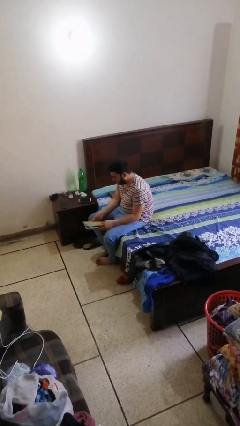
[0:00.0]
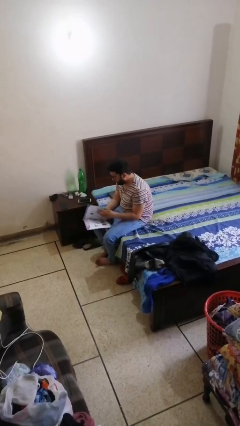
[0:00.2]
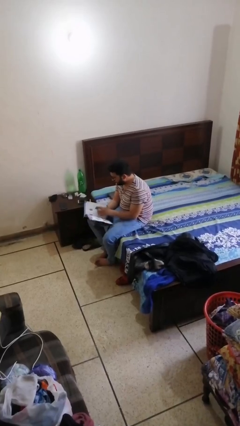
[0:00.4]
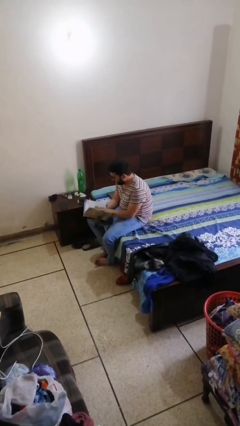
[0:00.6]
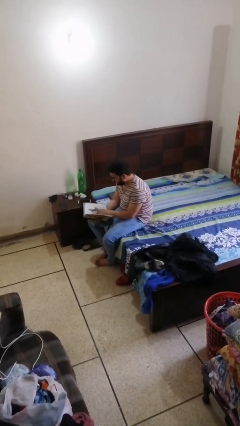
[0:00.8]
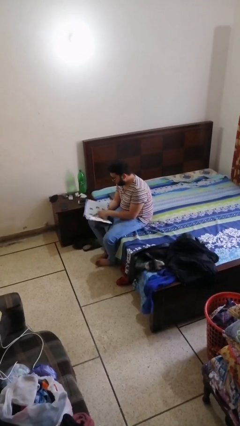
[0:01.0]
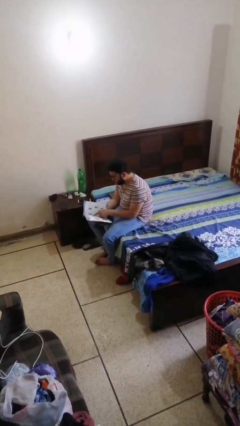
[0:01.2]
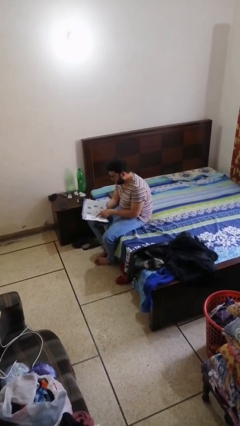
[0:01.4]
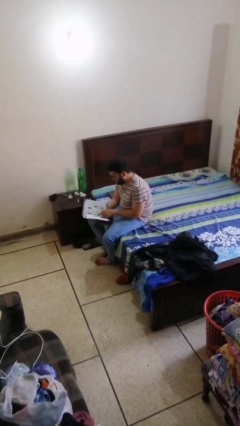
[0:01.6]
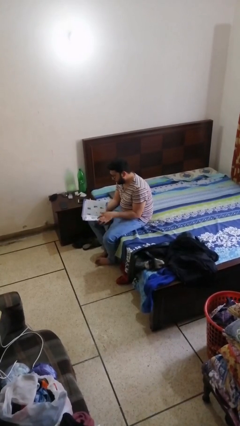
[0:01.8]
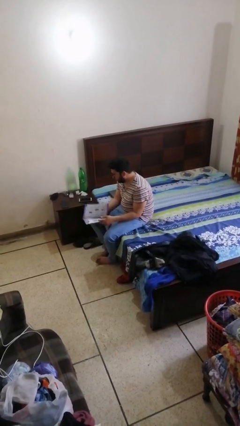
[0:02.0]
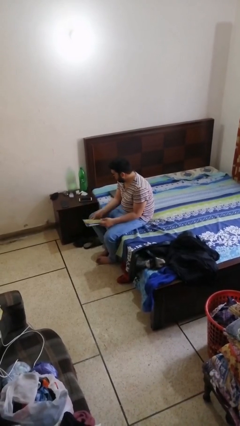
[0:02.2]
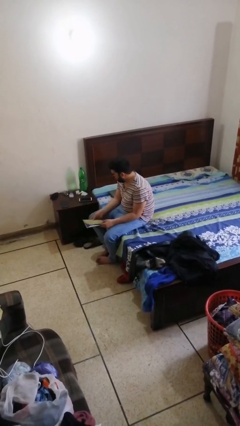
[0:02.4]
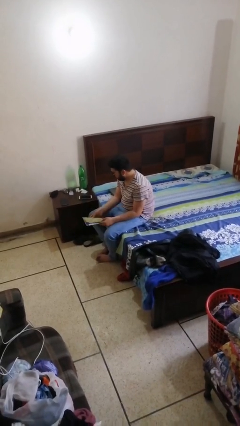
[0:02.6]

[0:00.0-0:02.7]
person reads document

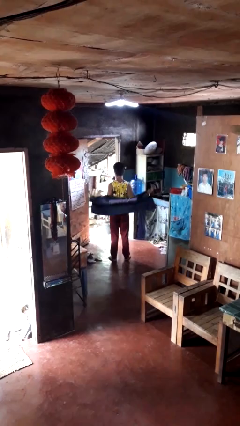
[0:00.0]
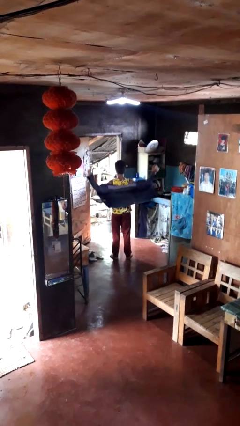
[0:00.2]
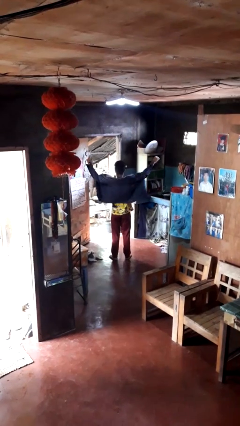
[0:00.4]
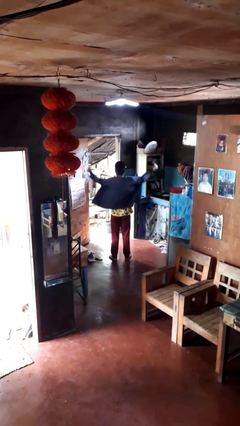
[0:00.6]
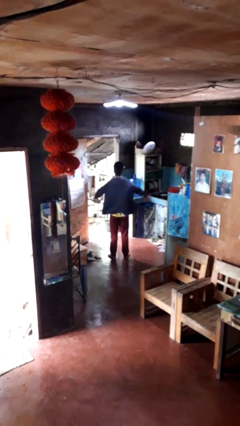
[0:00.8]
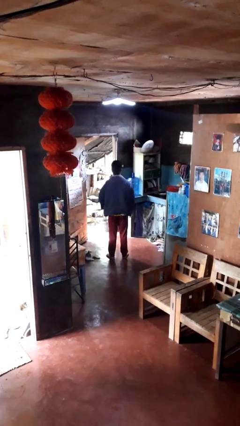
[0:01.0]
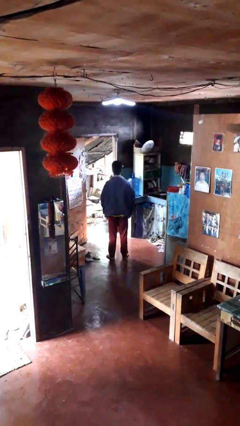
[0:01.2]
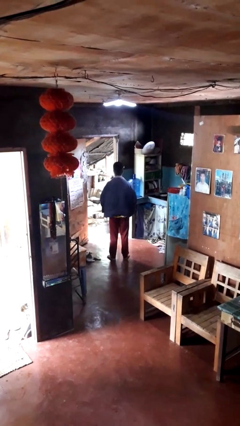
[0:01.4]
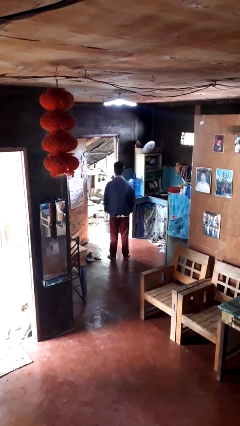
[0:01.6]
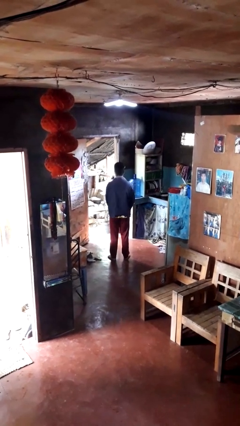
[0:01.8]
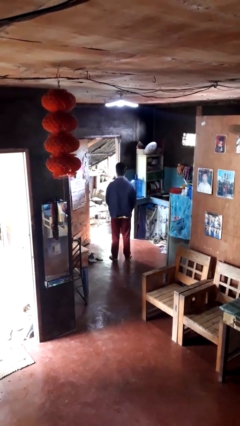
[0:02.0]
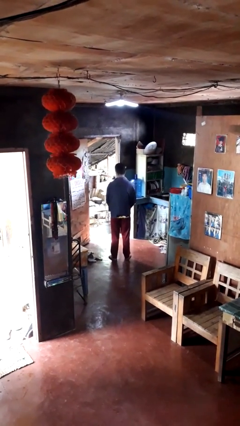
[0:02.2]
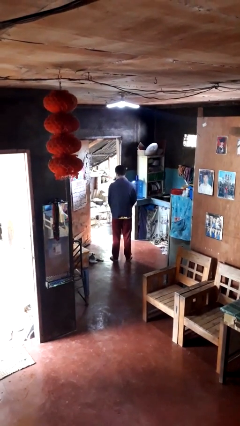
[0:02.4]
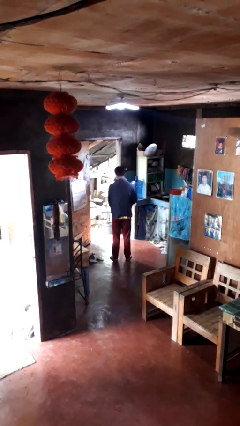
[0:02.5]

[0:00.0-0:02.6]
person puts on jacket

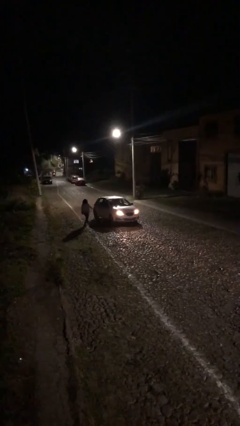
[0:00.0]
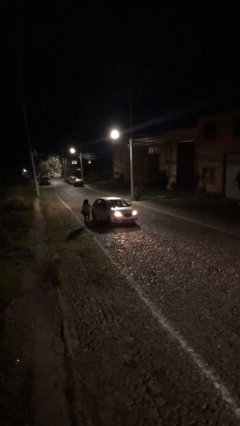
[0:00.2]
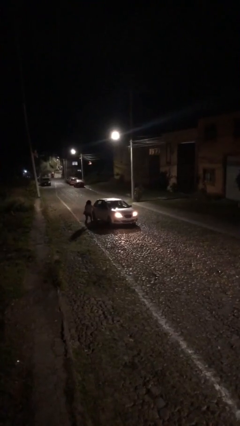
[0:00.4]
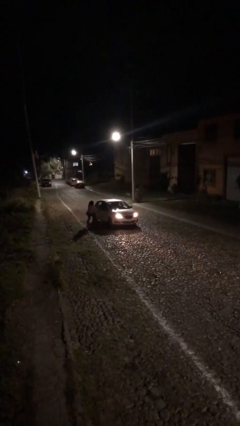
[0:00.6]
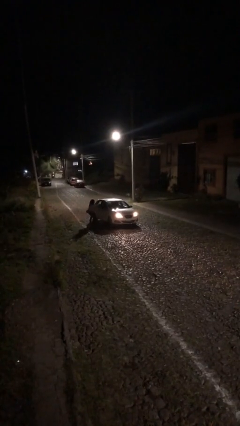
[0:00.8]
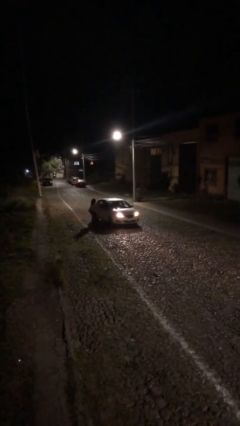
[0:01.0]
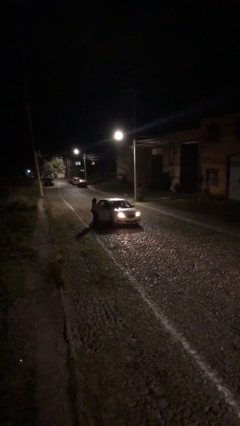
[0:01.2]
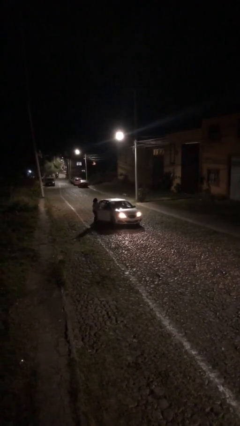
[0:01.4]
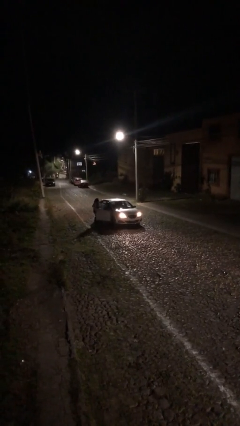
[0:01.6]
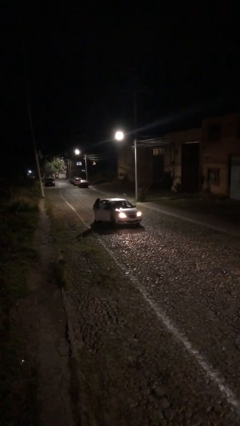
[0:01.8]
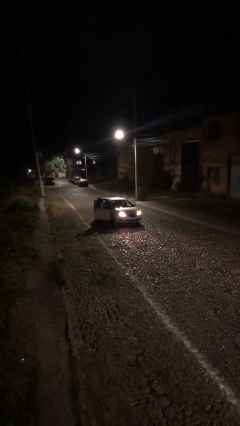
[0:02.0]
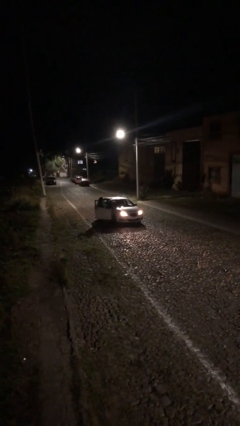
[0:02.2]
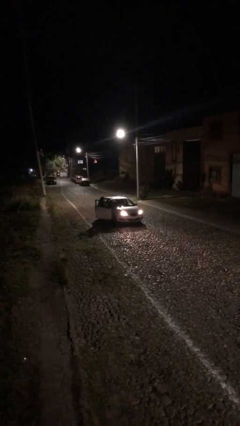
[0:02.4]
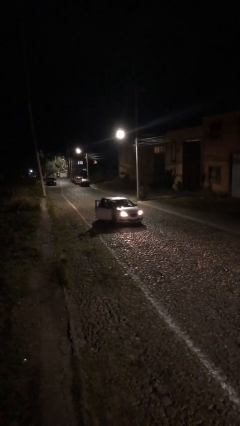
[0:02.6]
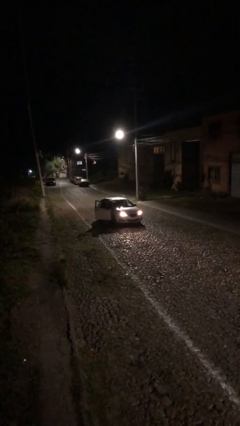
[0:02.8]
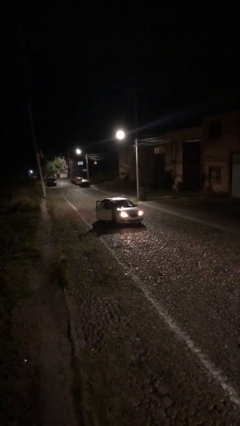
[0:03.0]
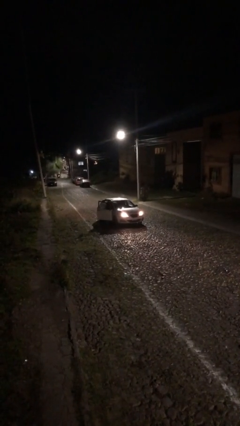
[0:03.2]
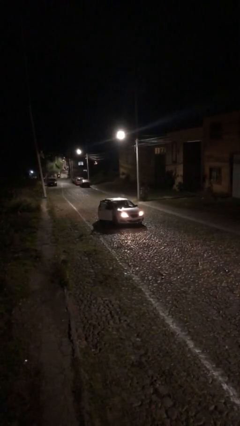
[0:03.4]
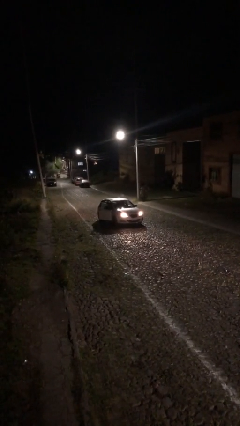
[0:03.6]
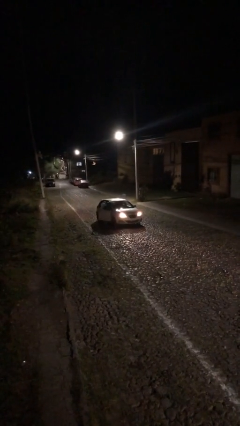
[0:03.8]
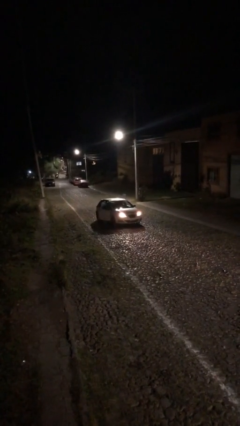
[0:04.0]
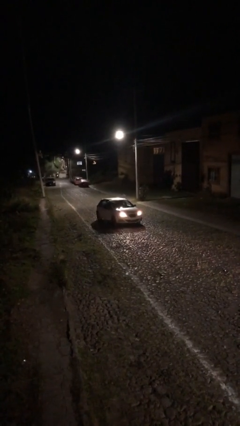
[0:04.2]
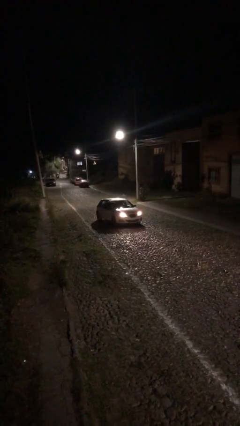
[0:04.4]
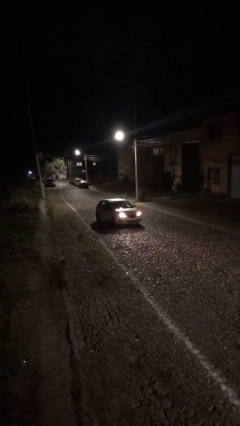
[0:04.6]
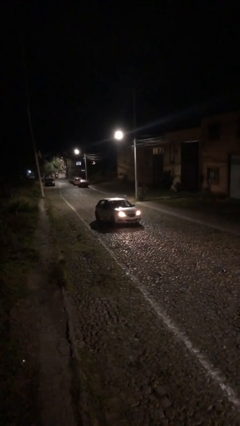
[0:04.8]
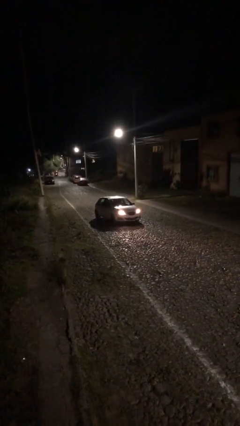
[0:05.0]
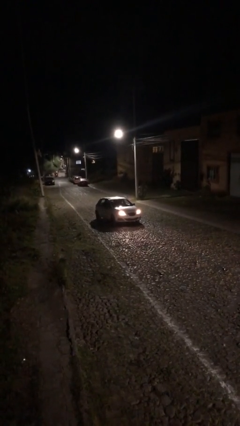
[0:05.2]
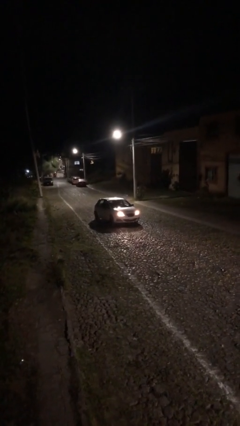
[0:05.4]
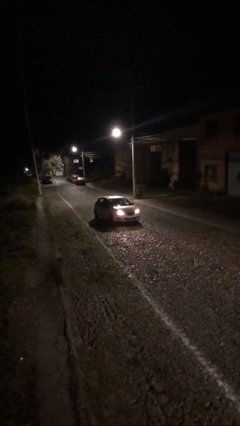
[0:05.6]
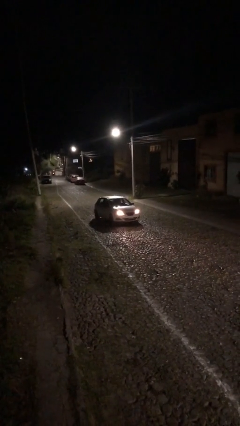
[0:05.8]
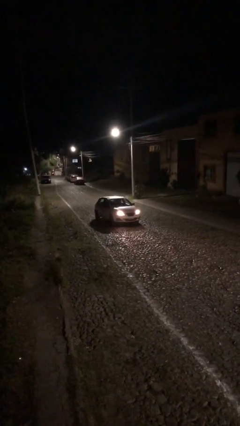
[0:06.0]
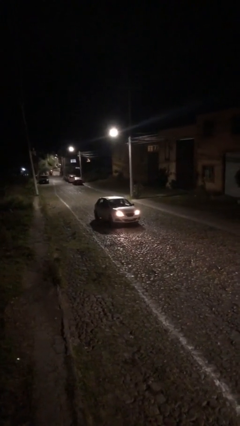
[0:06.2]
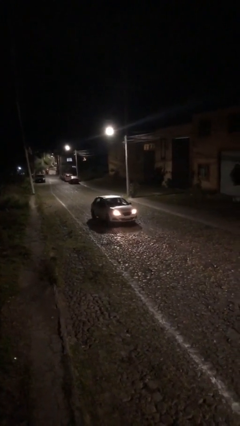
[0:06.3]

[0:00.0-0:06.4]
car picks up person

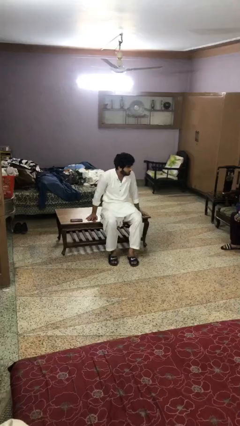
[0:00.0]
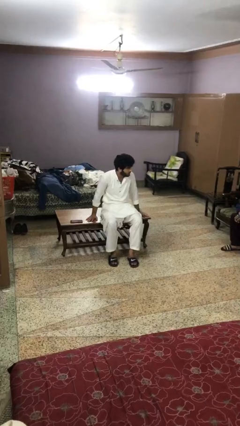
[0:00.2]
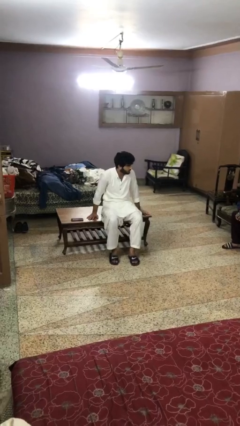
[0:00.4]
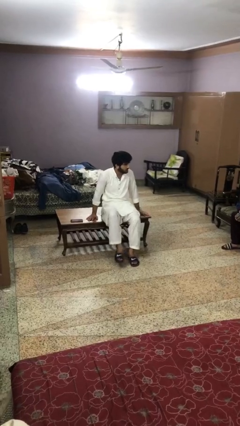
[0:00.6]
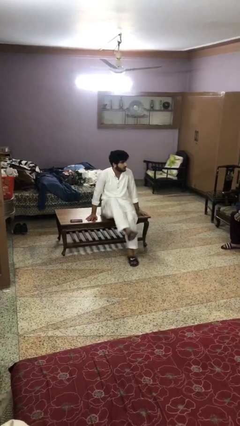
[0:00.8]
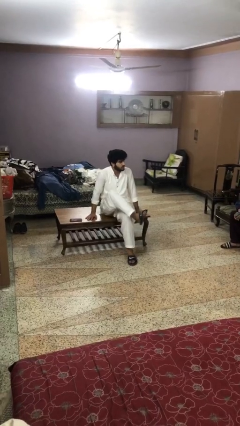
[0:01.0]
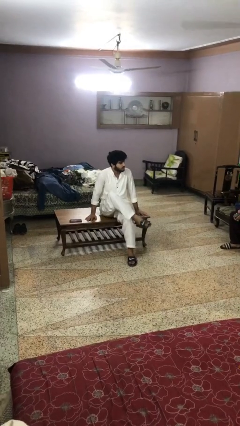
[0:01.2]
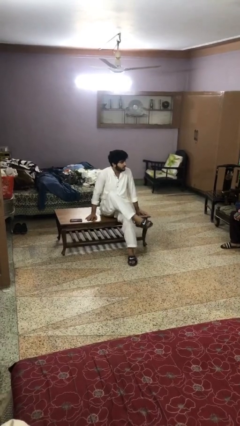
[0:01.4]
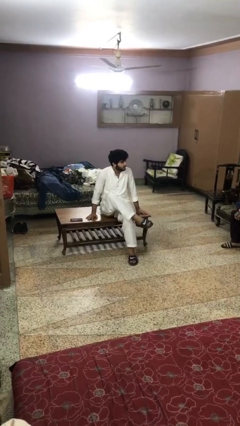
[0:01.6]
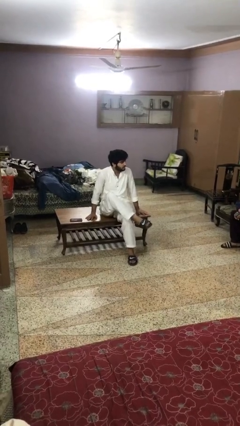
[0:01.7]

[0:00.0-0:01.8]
person crosses legs

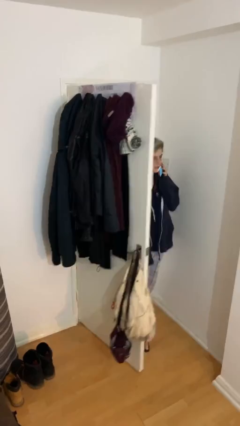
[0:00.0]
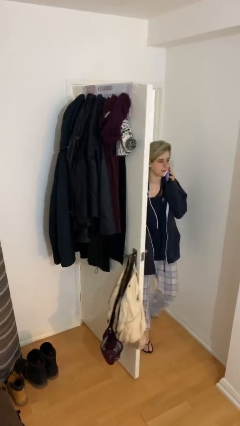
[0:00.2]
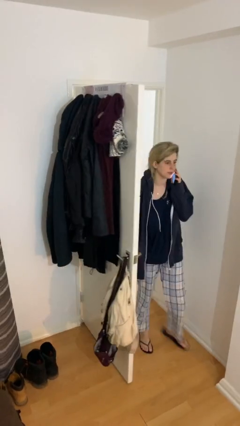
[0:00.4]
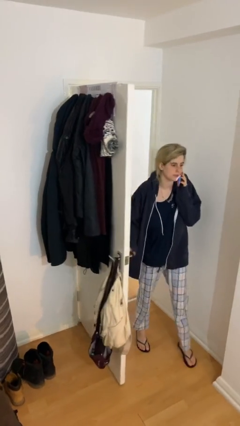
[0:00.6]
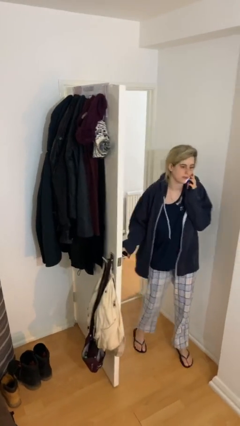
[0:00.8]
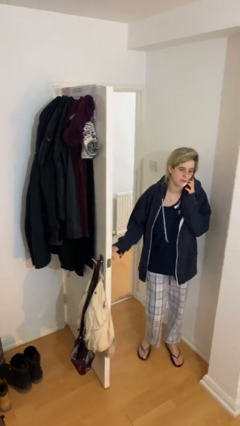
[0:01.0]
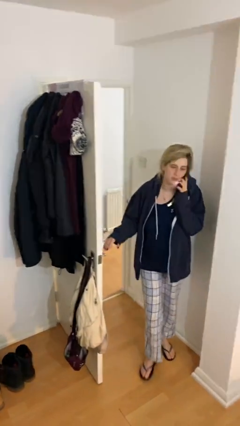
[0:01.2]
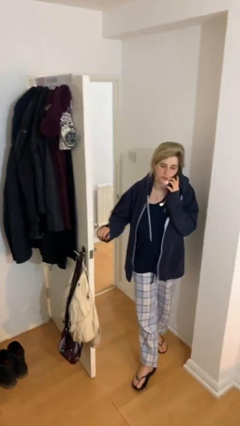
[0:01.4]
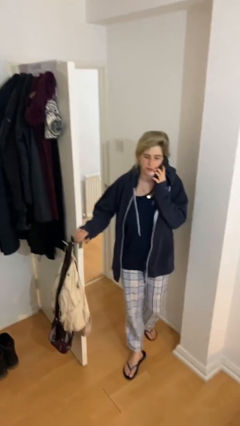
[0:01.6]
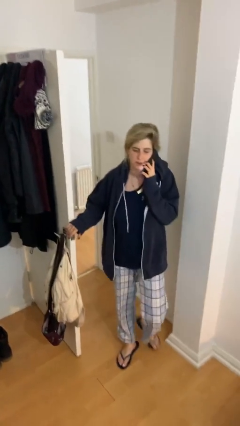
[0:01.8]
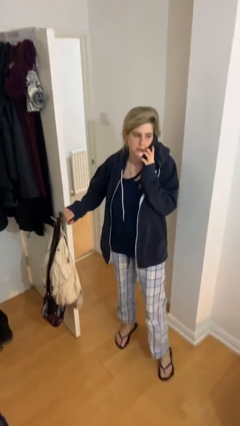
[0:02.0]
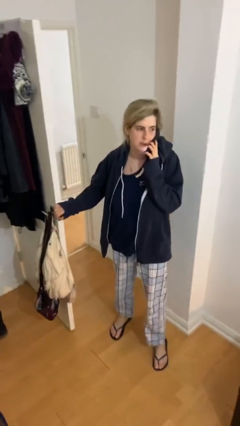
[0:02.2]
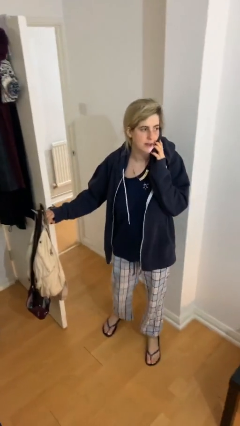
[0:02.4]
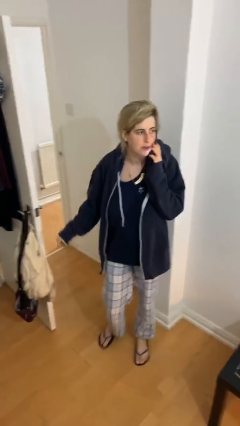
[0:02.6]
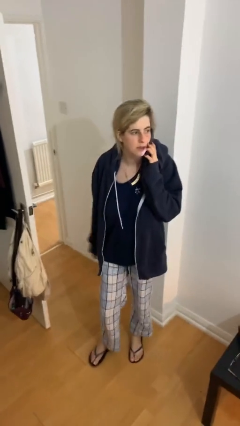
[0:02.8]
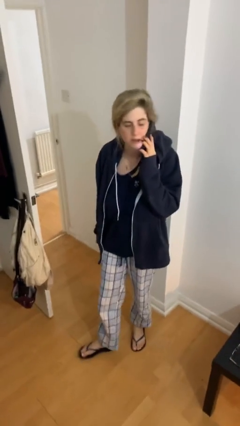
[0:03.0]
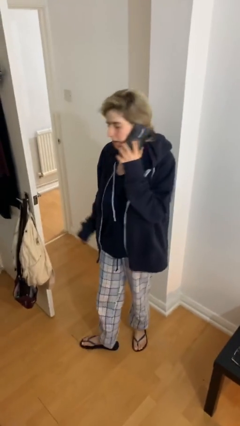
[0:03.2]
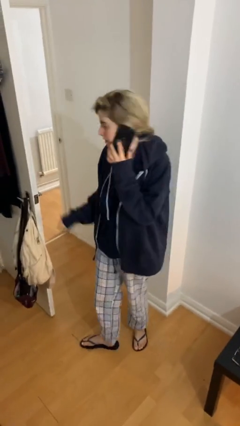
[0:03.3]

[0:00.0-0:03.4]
person enters scene through structure

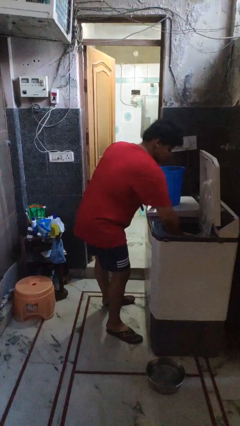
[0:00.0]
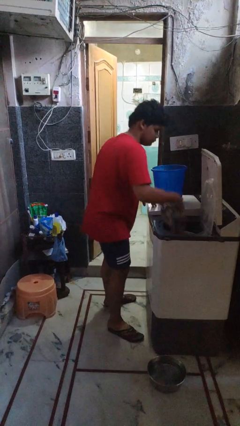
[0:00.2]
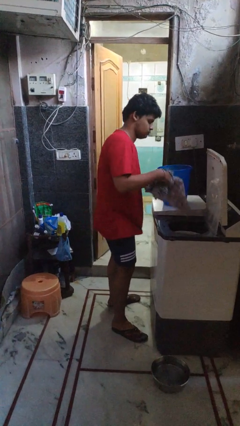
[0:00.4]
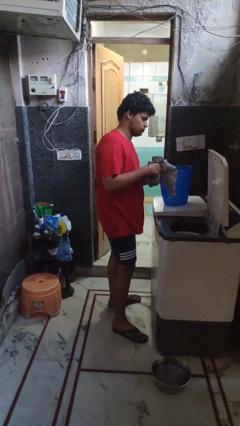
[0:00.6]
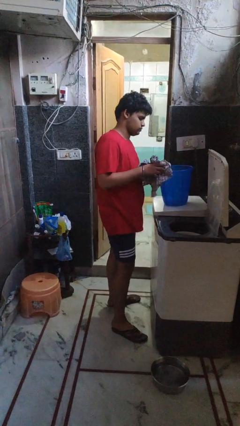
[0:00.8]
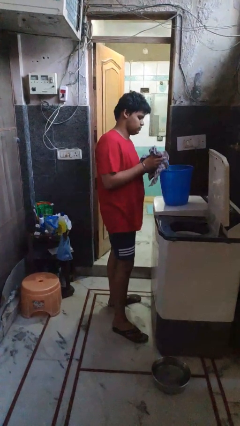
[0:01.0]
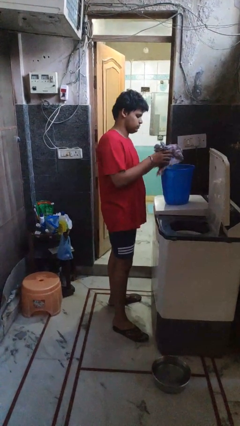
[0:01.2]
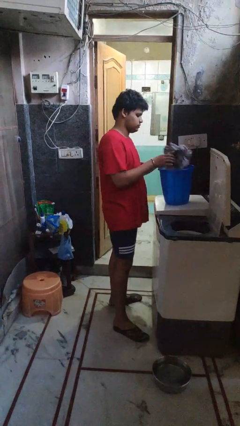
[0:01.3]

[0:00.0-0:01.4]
person unloads dryer
